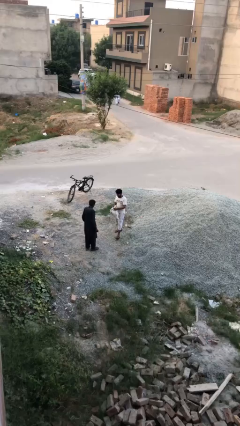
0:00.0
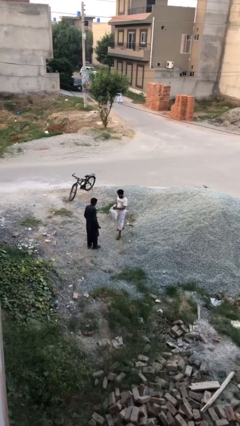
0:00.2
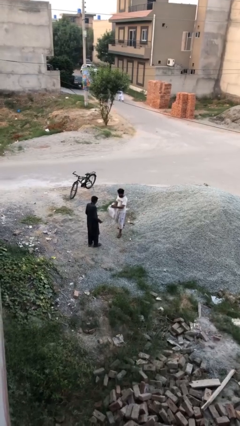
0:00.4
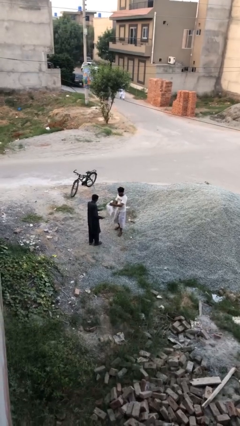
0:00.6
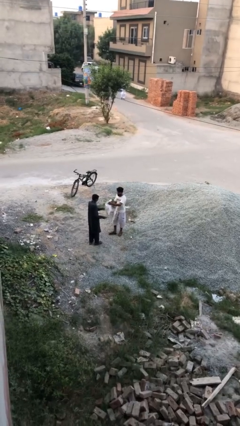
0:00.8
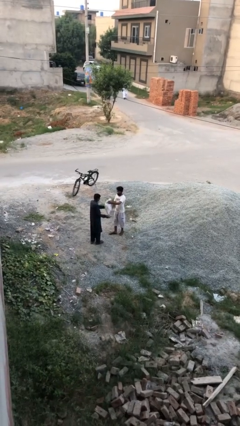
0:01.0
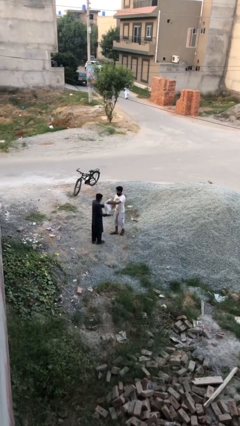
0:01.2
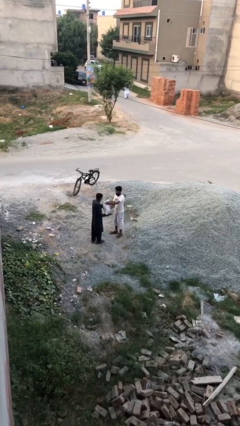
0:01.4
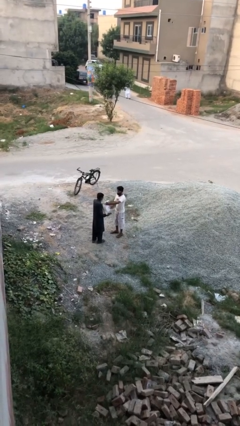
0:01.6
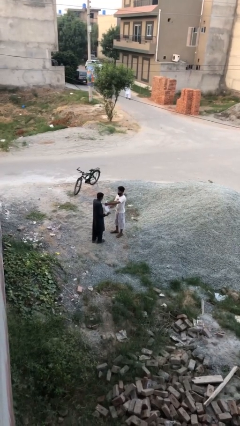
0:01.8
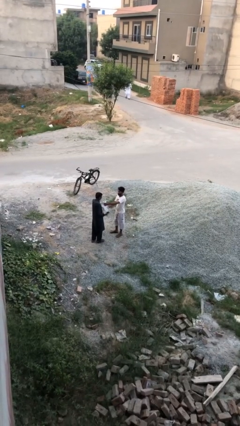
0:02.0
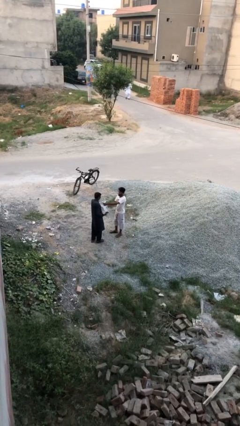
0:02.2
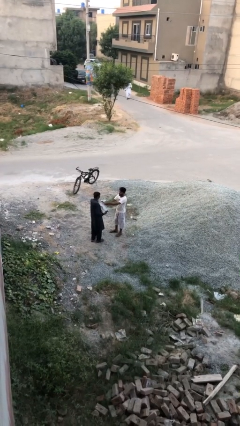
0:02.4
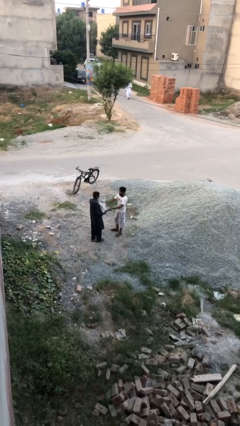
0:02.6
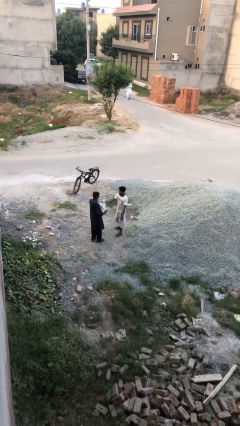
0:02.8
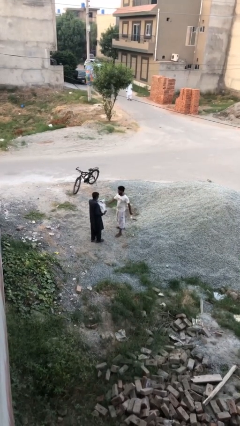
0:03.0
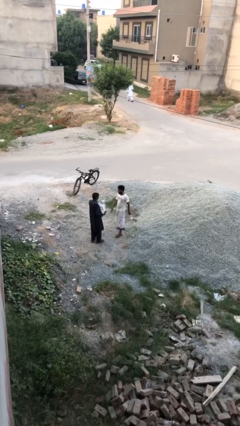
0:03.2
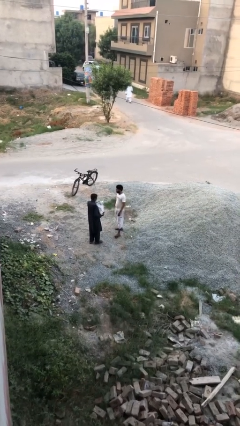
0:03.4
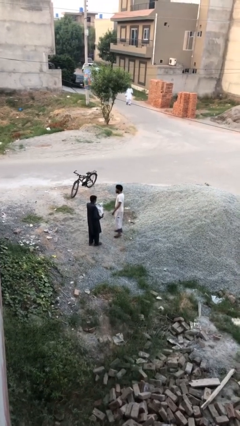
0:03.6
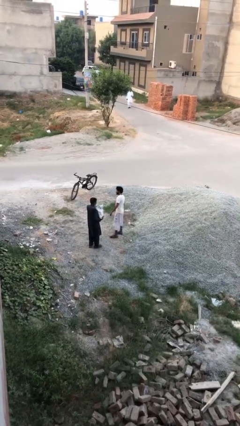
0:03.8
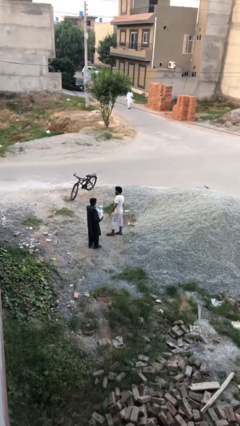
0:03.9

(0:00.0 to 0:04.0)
person transfers object to person

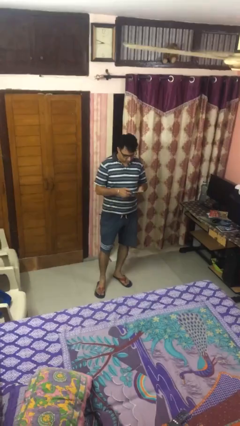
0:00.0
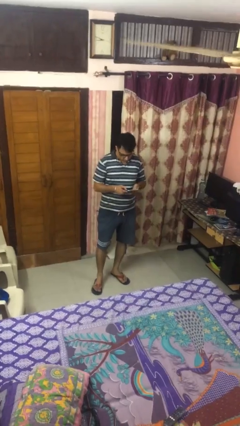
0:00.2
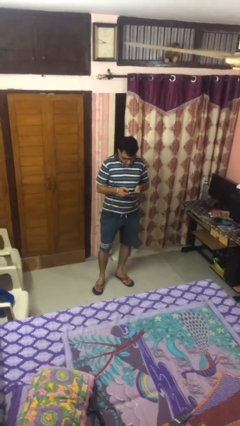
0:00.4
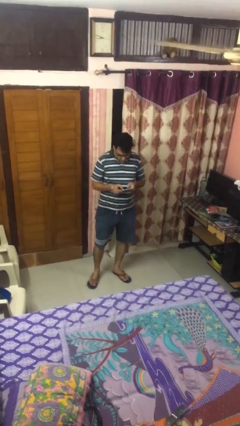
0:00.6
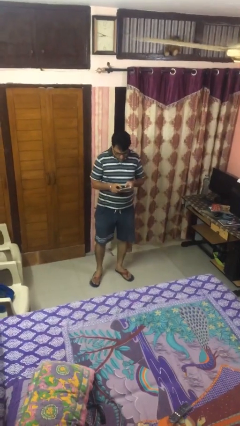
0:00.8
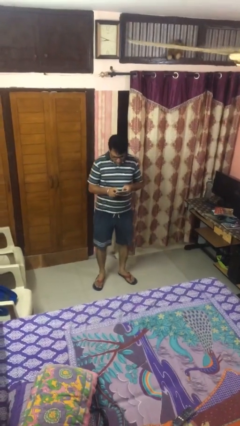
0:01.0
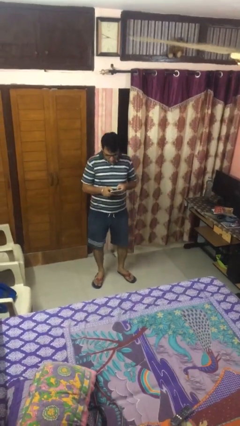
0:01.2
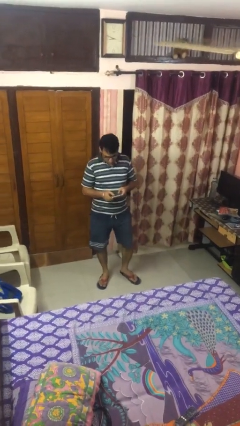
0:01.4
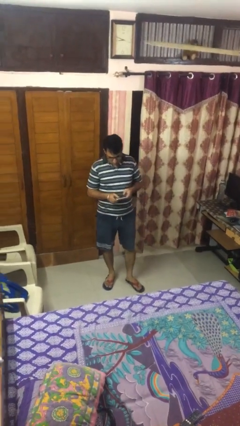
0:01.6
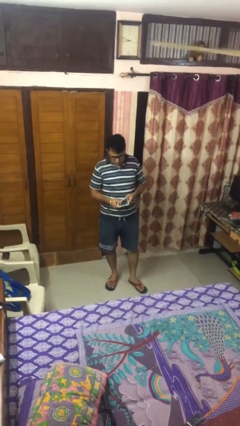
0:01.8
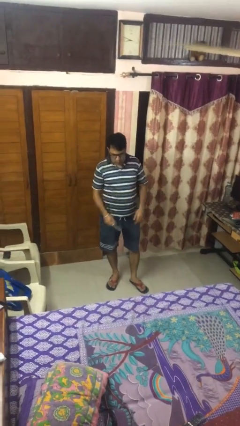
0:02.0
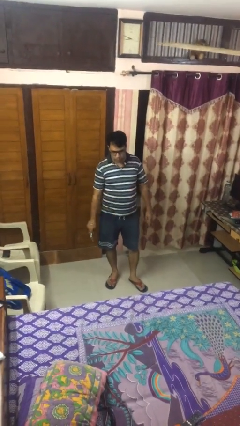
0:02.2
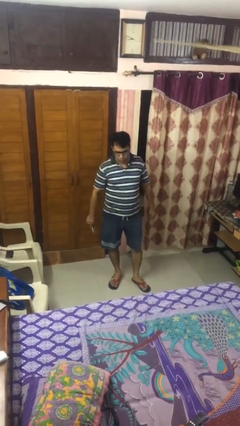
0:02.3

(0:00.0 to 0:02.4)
person interacts with tablet

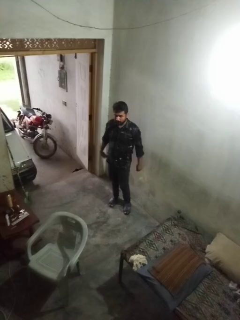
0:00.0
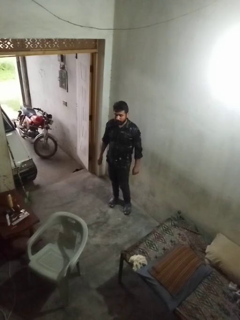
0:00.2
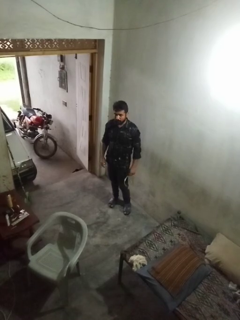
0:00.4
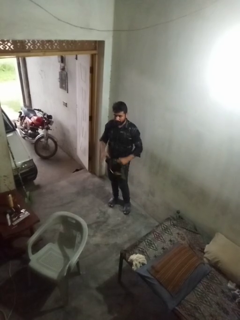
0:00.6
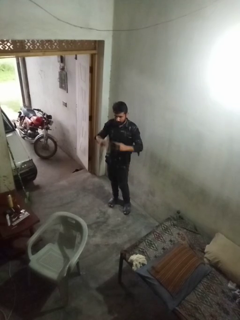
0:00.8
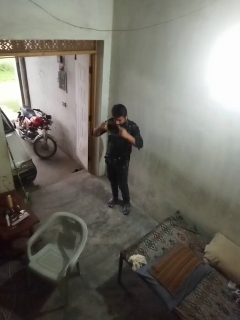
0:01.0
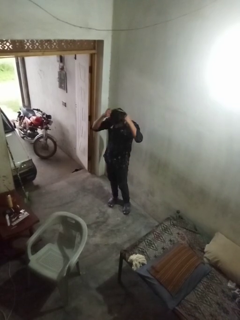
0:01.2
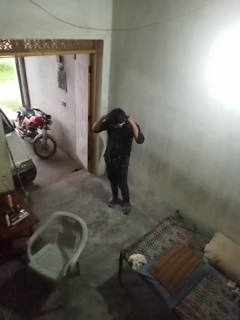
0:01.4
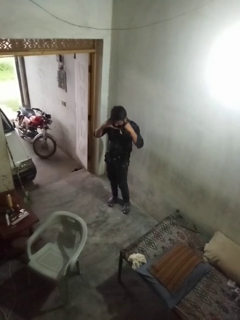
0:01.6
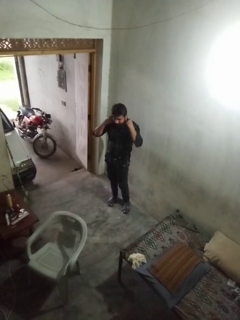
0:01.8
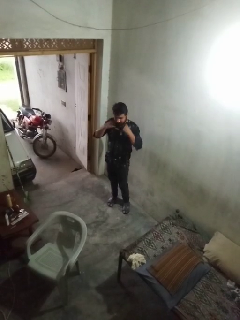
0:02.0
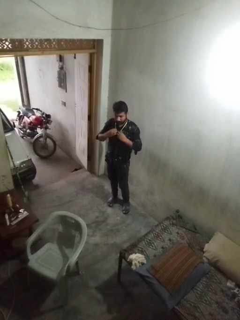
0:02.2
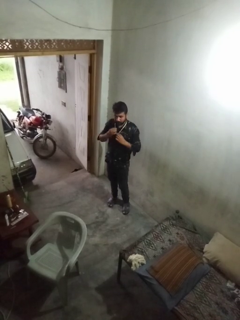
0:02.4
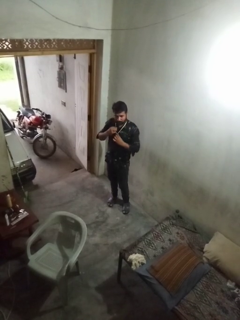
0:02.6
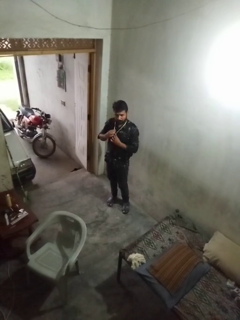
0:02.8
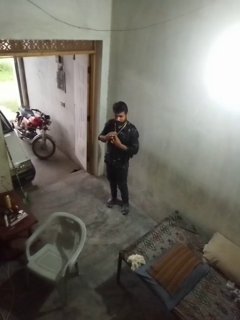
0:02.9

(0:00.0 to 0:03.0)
person puts on necklace

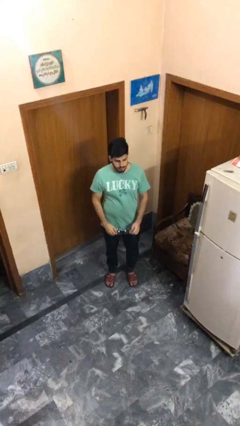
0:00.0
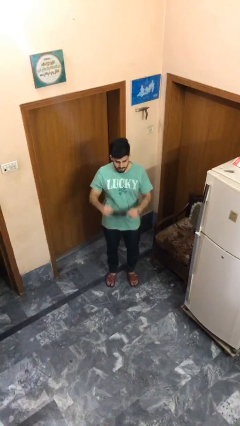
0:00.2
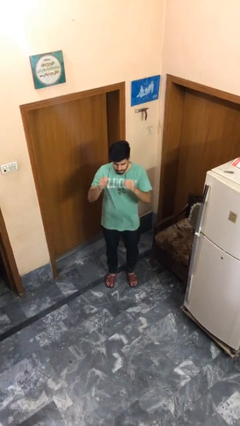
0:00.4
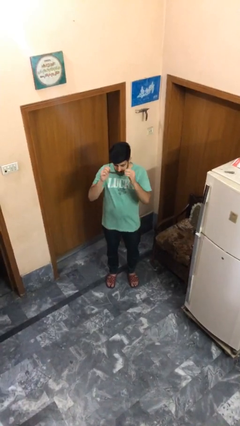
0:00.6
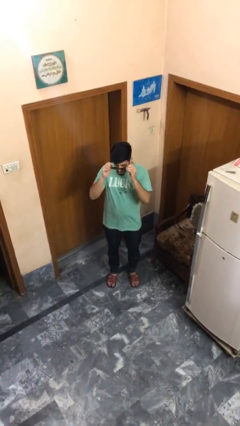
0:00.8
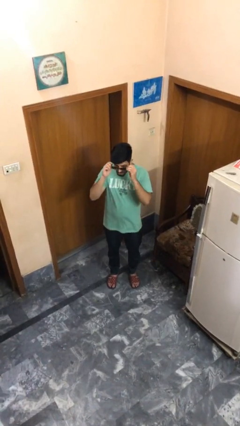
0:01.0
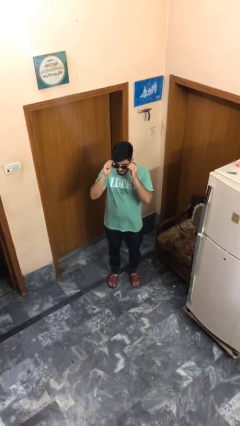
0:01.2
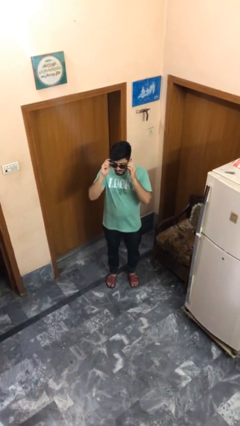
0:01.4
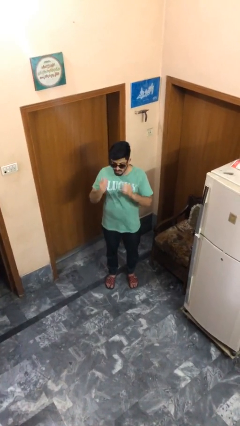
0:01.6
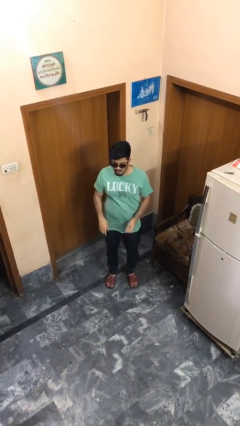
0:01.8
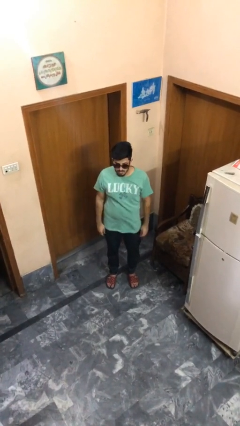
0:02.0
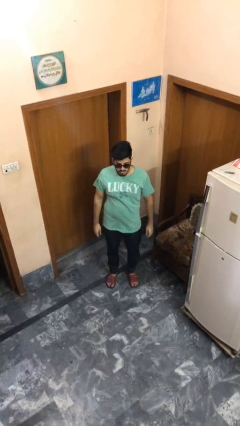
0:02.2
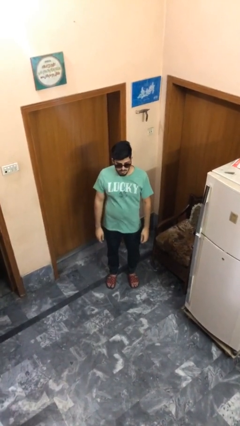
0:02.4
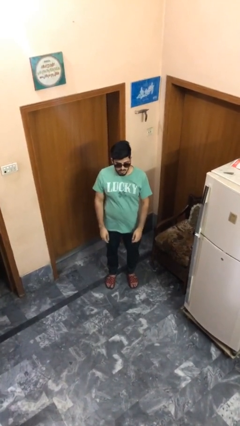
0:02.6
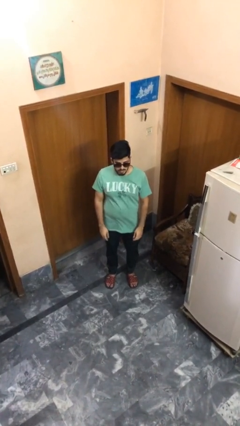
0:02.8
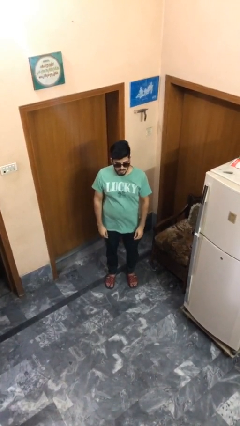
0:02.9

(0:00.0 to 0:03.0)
person puts on sunglasses

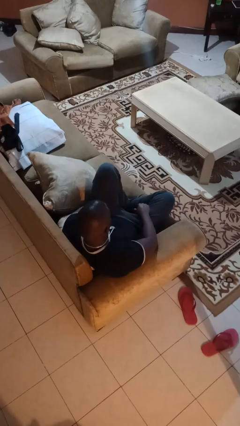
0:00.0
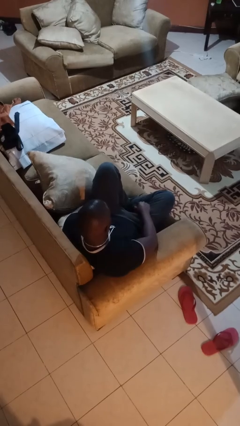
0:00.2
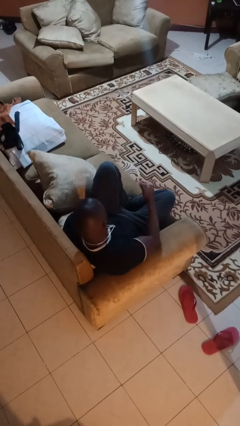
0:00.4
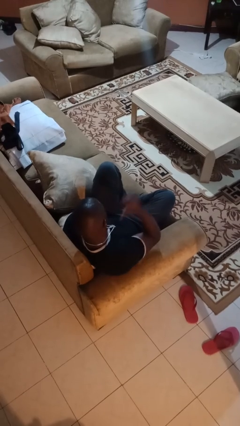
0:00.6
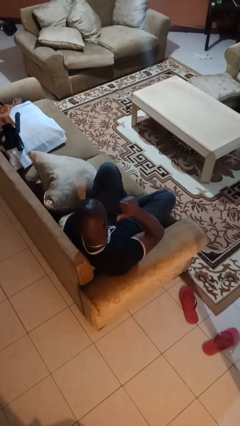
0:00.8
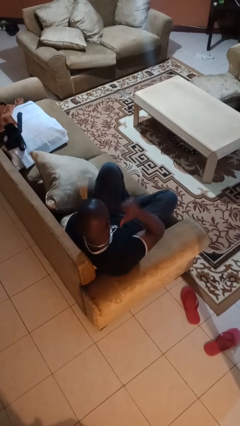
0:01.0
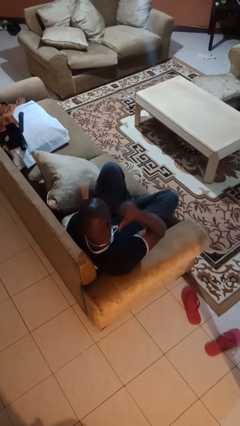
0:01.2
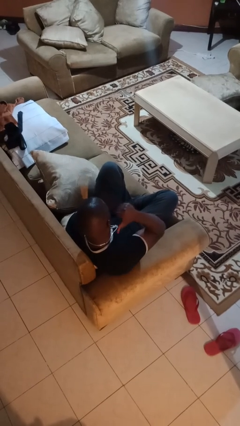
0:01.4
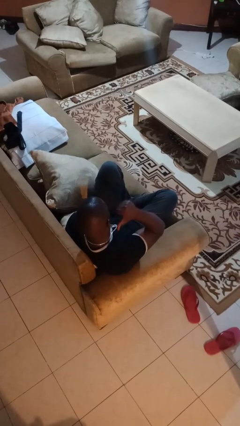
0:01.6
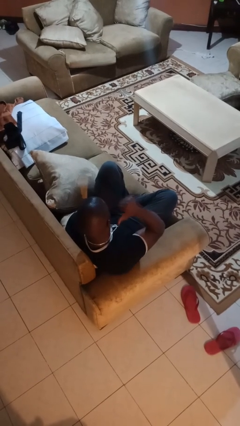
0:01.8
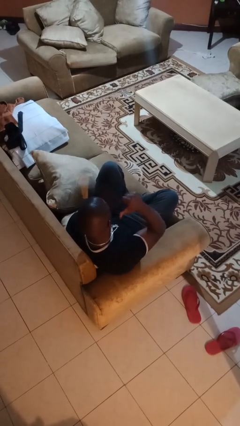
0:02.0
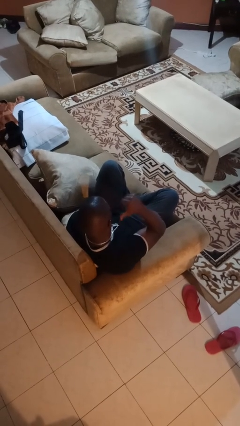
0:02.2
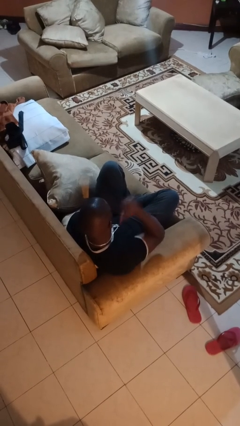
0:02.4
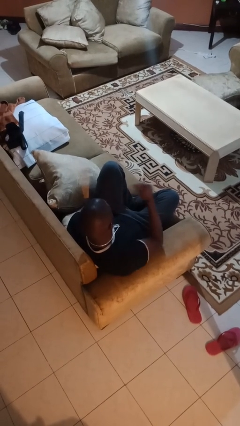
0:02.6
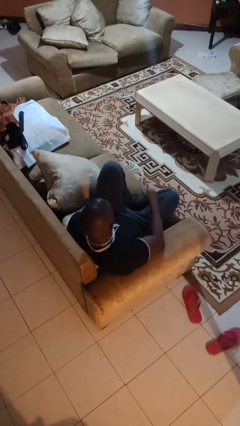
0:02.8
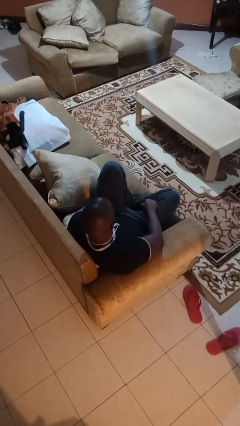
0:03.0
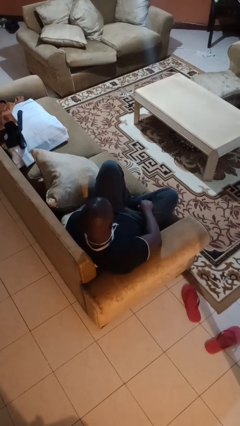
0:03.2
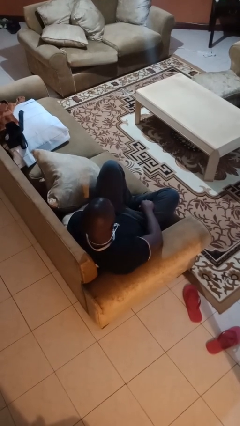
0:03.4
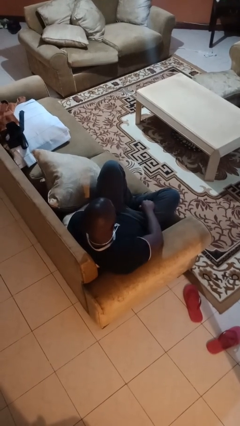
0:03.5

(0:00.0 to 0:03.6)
person gestures behind me

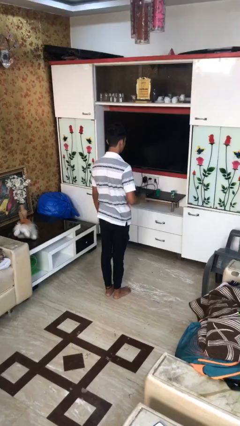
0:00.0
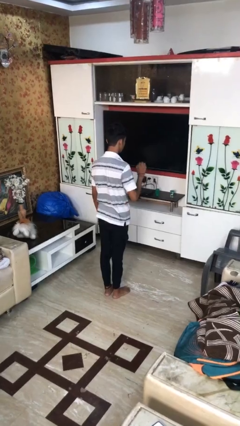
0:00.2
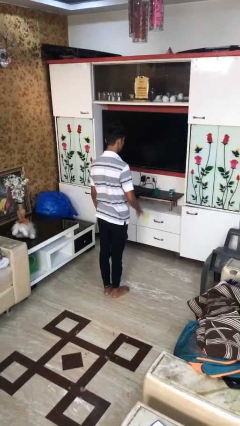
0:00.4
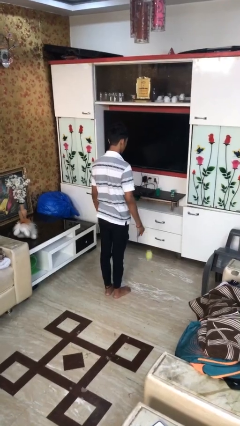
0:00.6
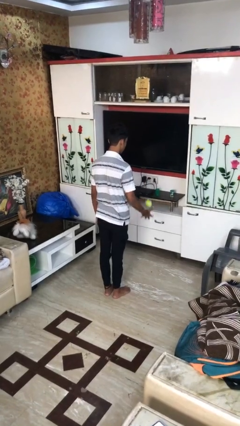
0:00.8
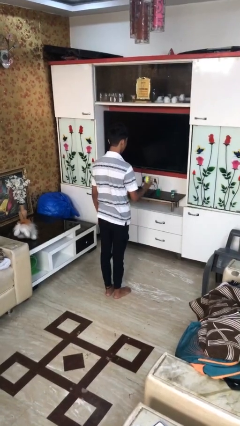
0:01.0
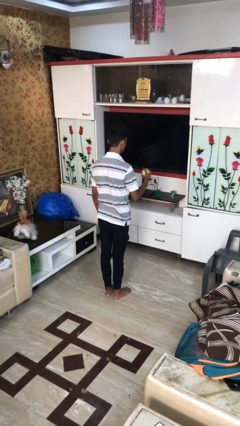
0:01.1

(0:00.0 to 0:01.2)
person bounces ball on floor

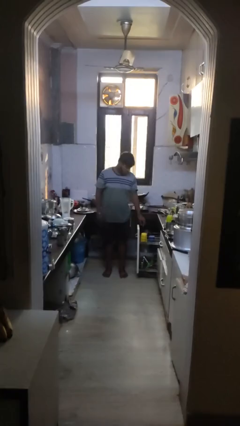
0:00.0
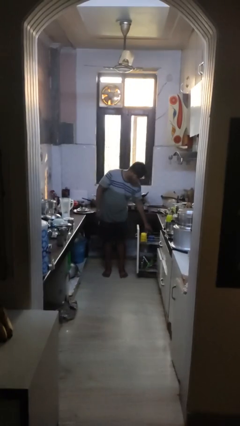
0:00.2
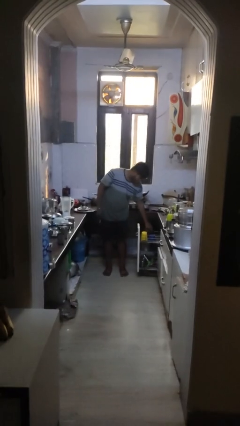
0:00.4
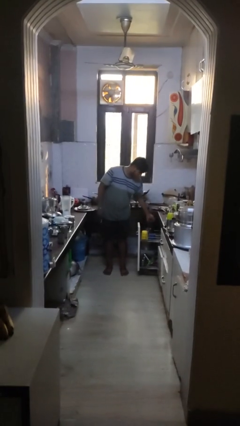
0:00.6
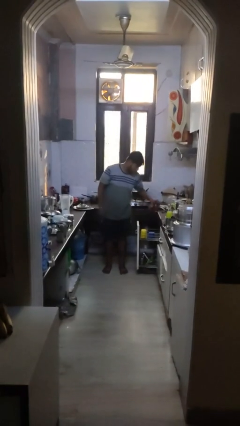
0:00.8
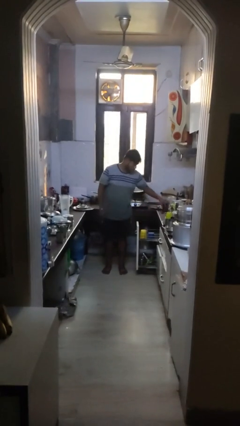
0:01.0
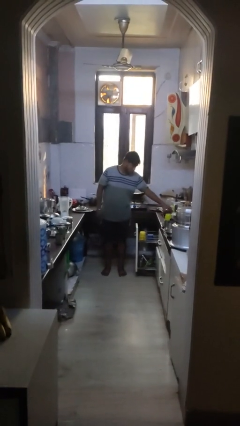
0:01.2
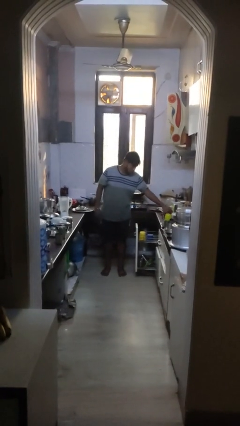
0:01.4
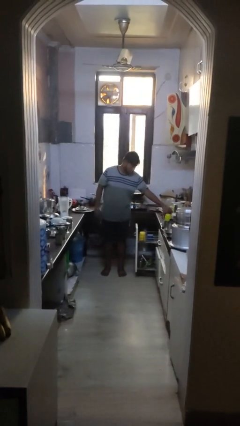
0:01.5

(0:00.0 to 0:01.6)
person unloads dishwasher
